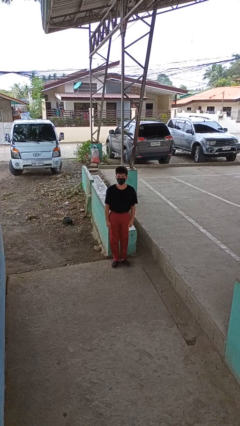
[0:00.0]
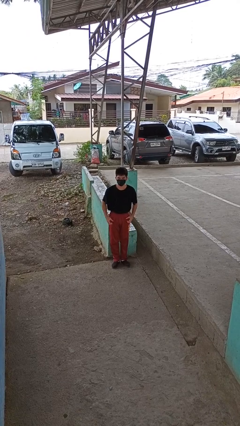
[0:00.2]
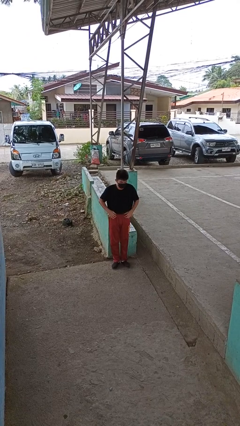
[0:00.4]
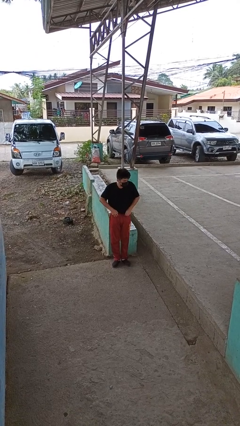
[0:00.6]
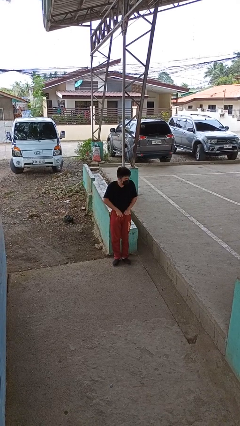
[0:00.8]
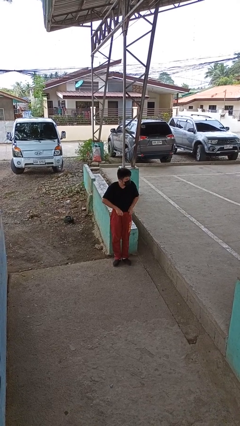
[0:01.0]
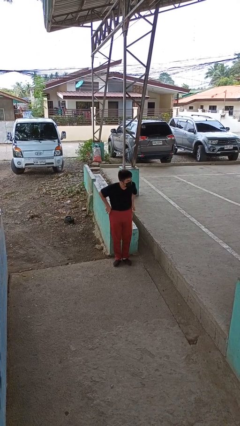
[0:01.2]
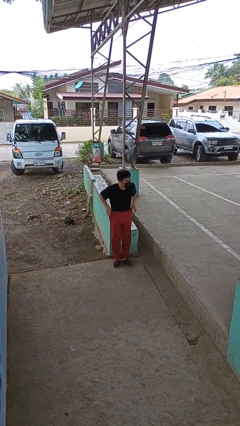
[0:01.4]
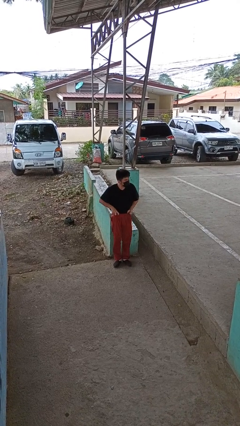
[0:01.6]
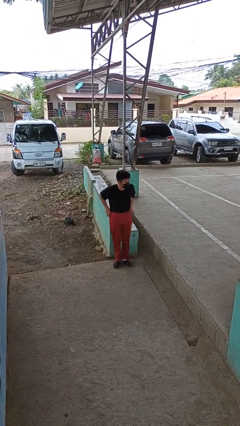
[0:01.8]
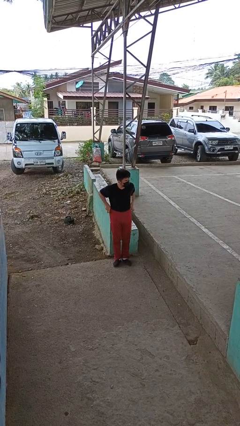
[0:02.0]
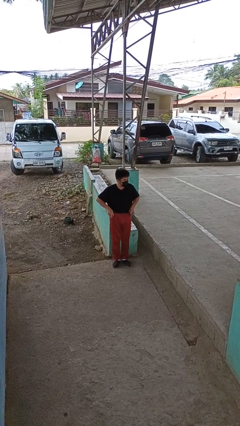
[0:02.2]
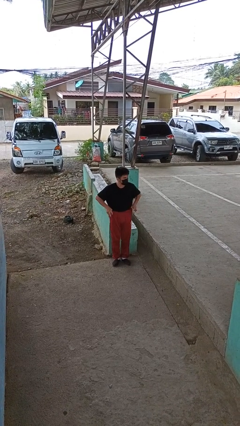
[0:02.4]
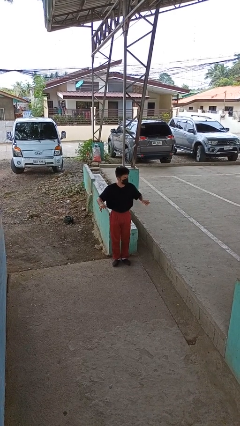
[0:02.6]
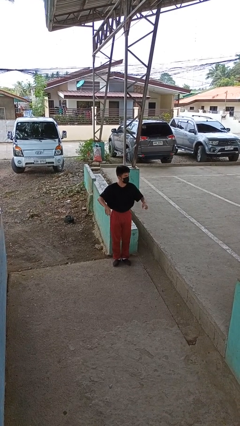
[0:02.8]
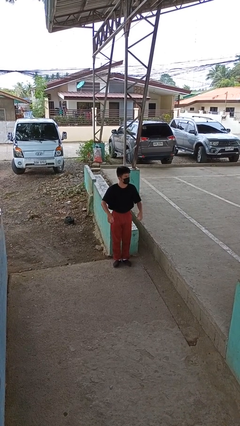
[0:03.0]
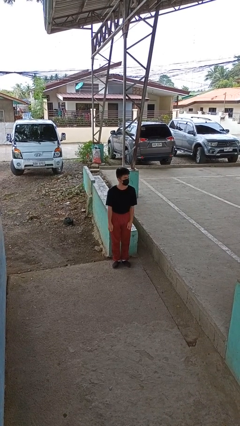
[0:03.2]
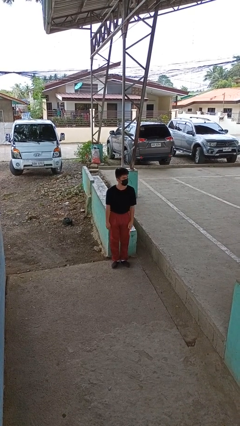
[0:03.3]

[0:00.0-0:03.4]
person hikes up pants

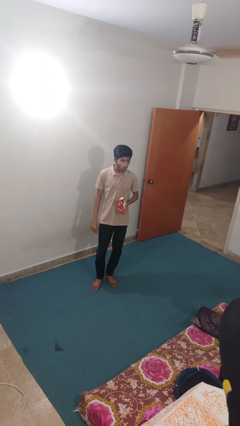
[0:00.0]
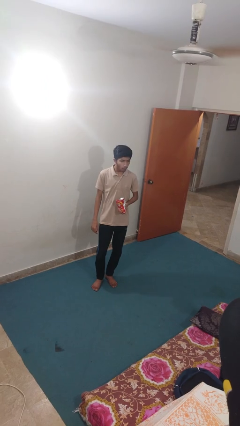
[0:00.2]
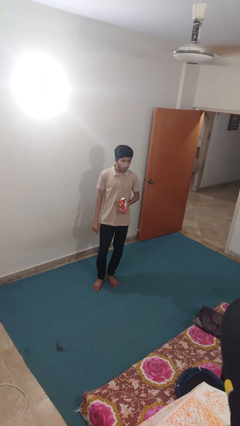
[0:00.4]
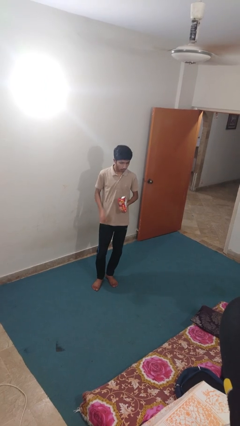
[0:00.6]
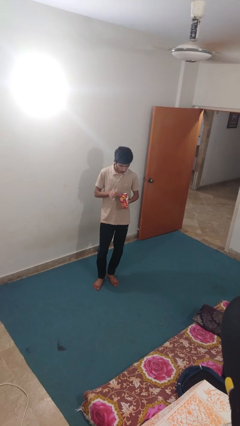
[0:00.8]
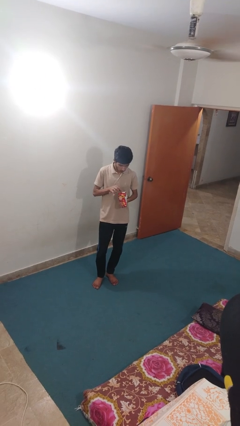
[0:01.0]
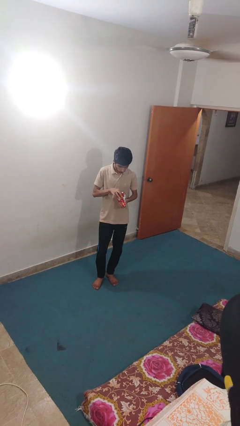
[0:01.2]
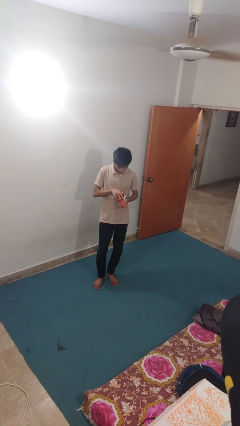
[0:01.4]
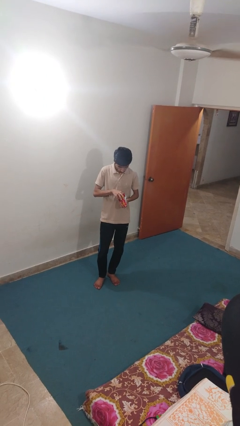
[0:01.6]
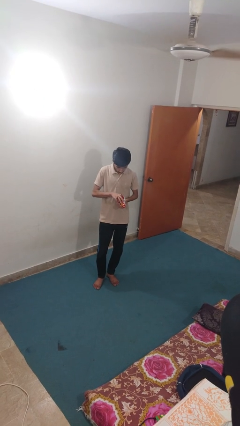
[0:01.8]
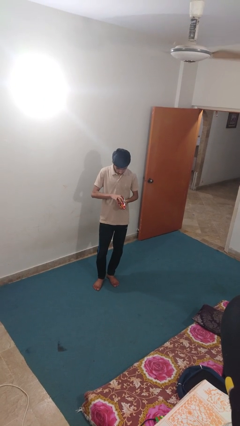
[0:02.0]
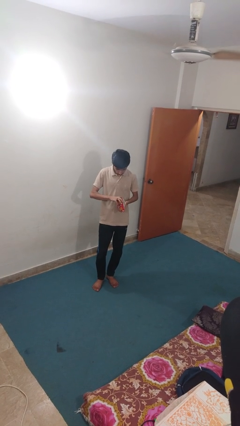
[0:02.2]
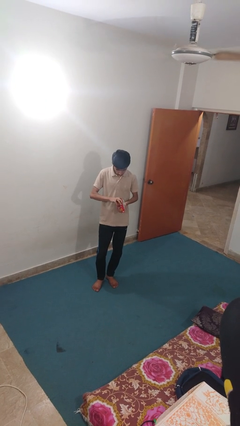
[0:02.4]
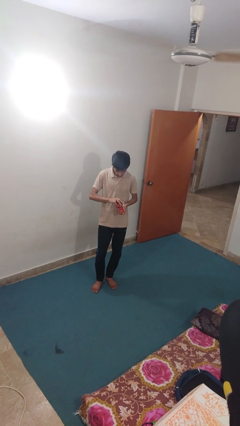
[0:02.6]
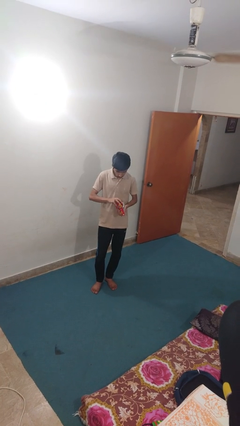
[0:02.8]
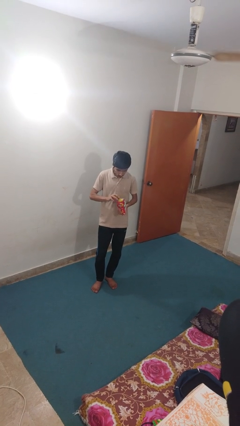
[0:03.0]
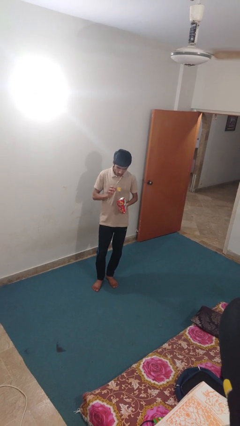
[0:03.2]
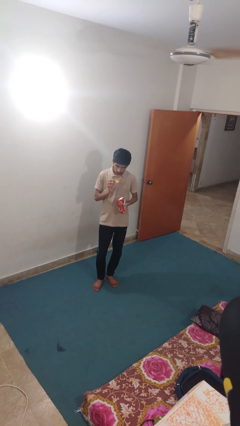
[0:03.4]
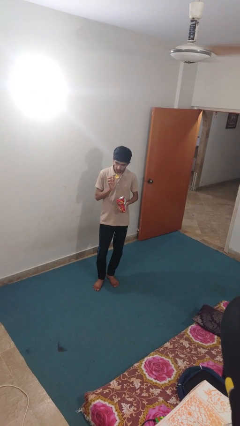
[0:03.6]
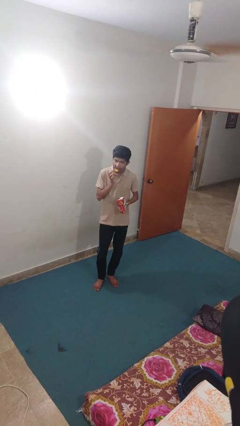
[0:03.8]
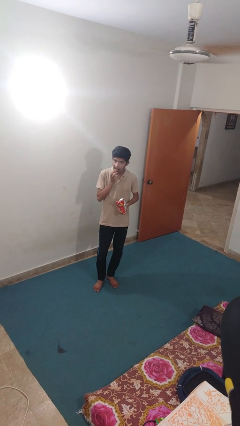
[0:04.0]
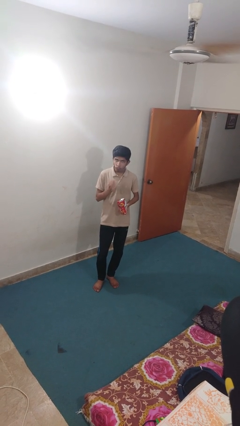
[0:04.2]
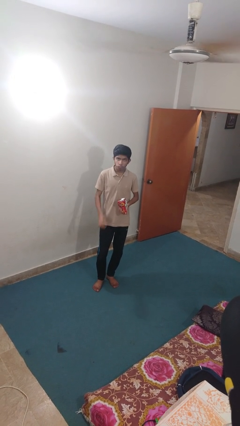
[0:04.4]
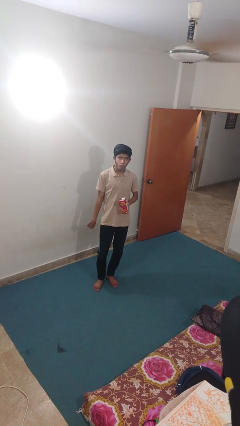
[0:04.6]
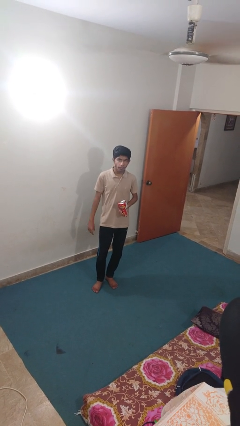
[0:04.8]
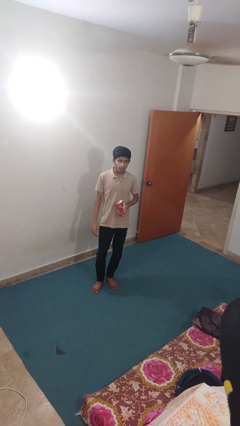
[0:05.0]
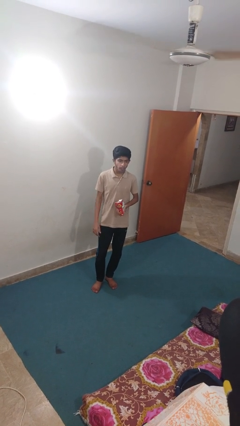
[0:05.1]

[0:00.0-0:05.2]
person eats snack from bag

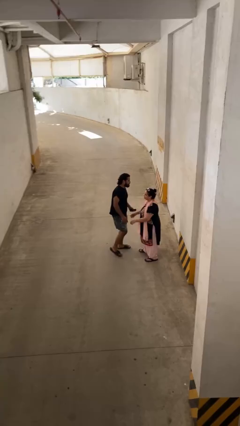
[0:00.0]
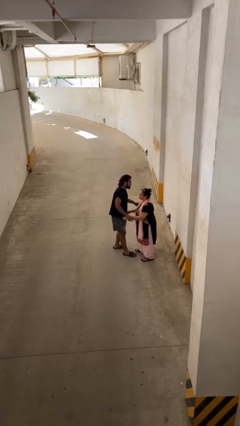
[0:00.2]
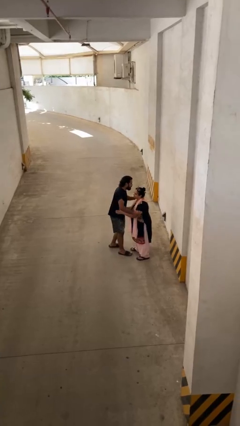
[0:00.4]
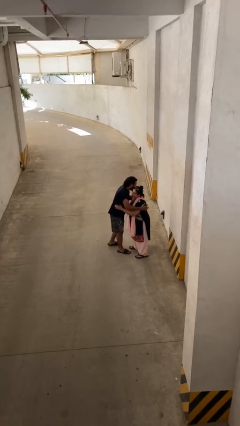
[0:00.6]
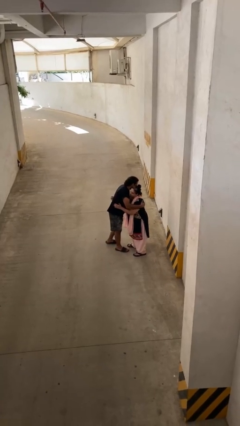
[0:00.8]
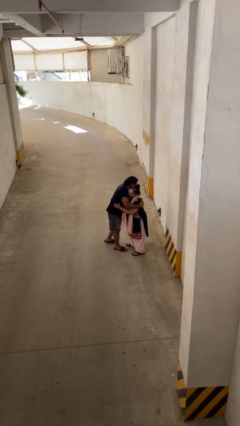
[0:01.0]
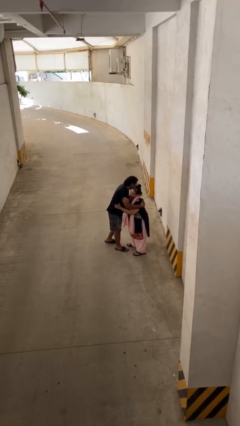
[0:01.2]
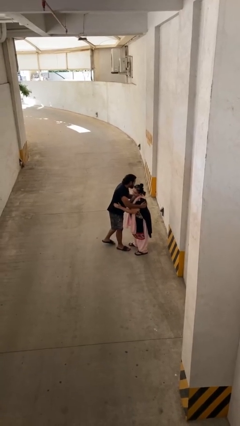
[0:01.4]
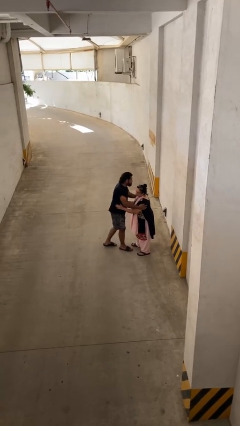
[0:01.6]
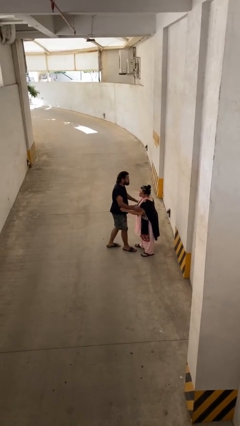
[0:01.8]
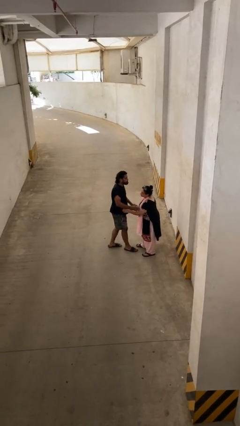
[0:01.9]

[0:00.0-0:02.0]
person embraces person

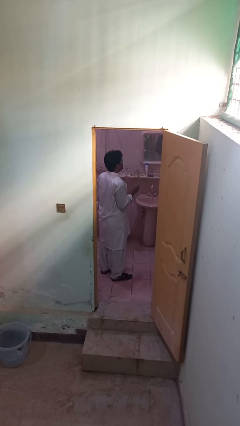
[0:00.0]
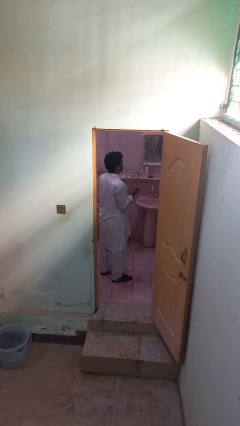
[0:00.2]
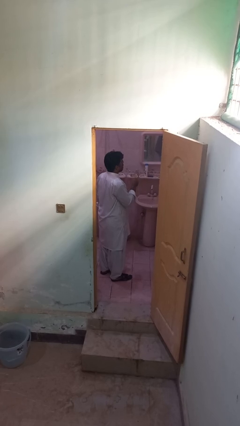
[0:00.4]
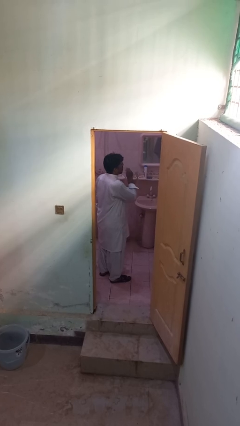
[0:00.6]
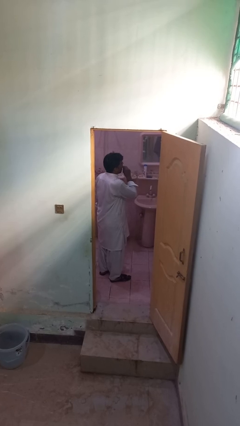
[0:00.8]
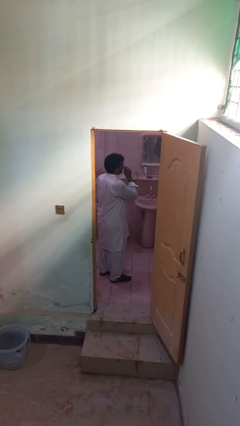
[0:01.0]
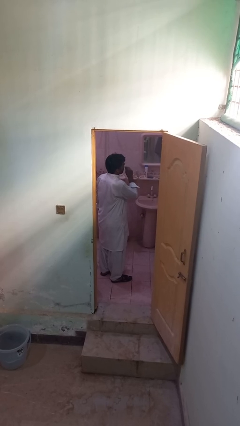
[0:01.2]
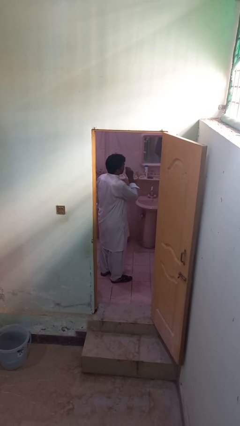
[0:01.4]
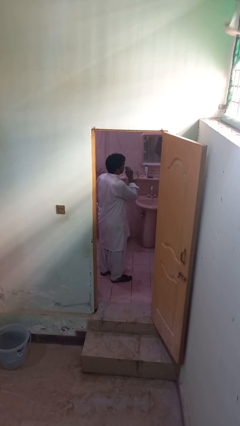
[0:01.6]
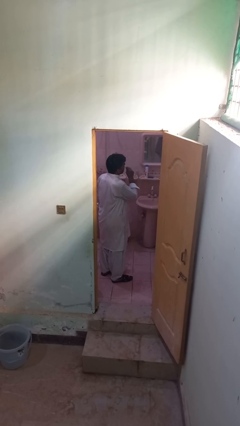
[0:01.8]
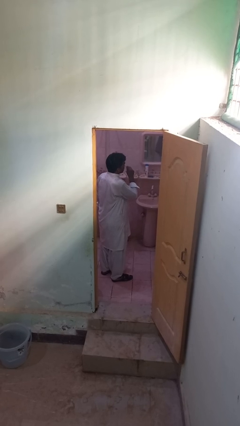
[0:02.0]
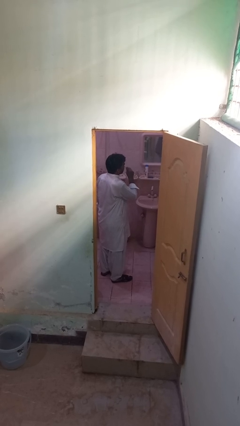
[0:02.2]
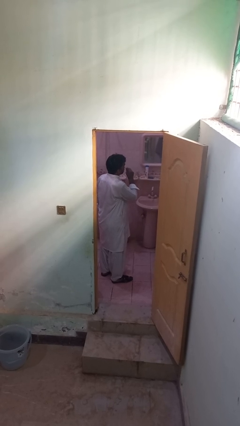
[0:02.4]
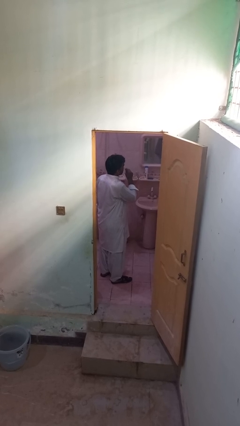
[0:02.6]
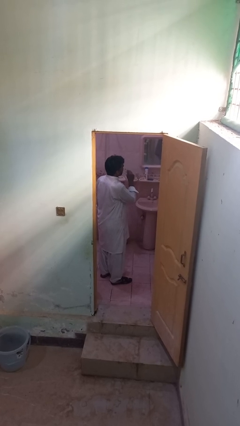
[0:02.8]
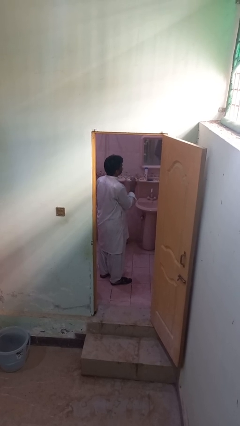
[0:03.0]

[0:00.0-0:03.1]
person flosses

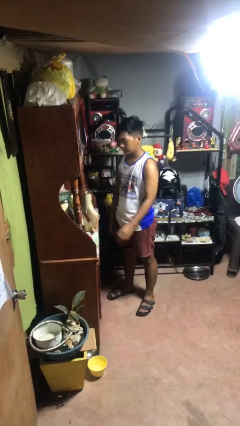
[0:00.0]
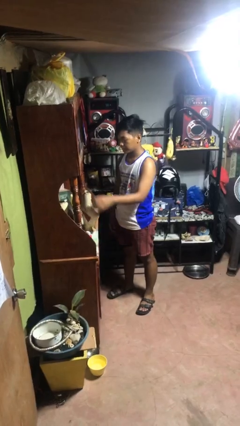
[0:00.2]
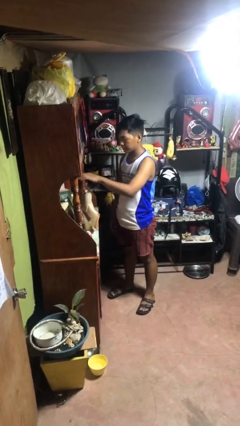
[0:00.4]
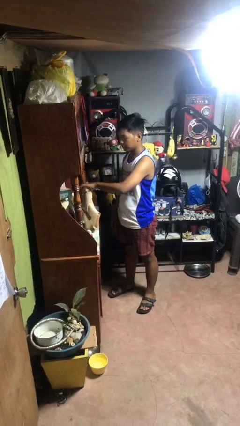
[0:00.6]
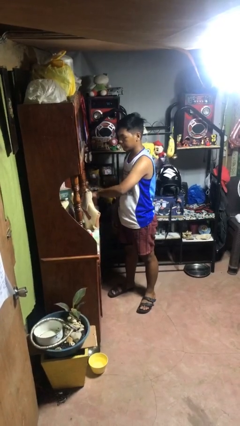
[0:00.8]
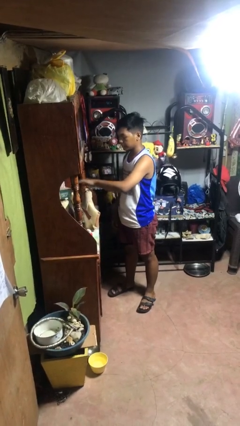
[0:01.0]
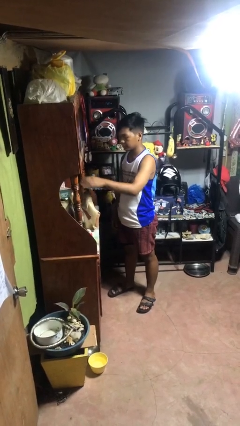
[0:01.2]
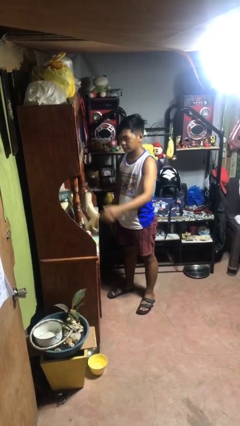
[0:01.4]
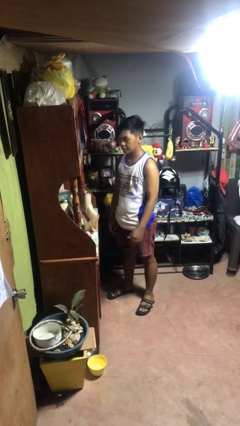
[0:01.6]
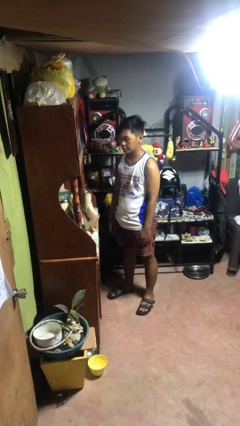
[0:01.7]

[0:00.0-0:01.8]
person waves hand over object

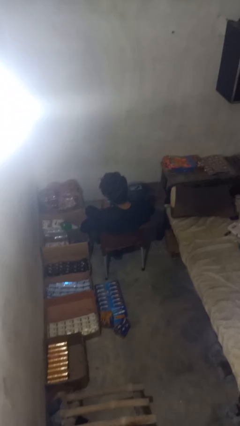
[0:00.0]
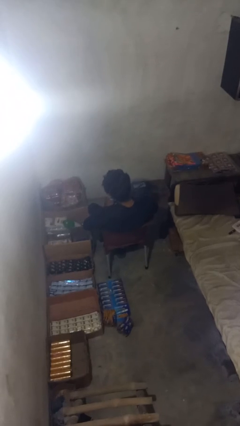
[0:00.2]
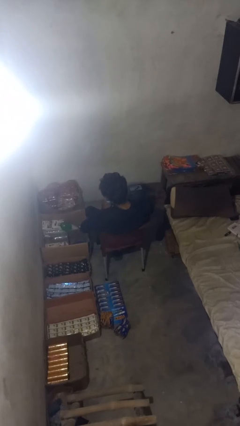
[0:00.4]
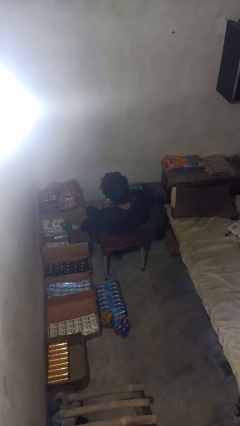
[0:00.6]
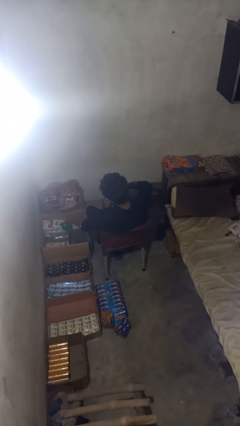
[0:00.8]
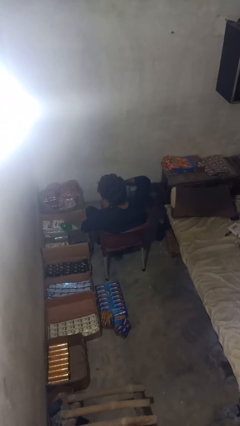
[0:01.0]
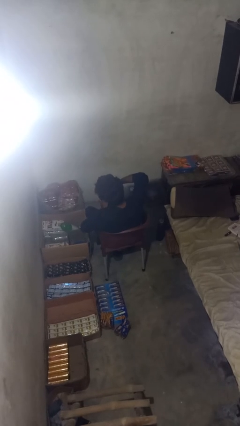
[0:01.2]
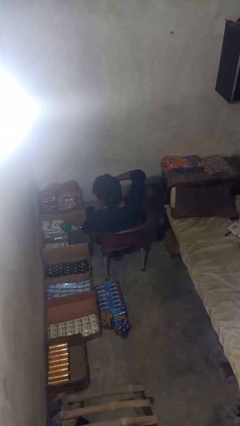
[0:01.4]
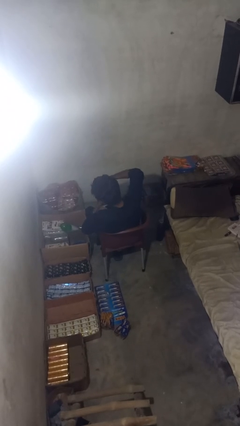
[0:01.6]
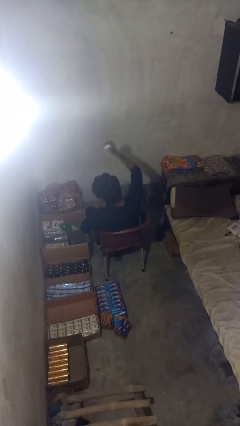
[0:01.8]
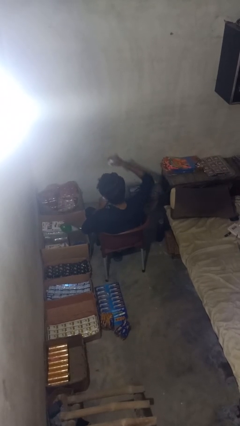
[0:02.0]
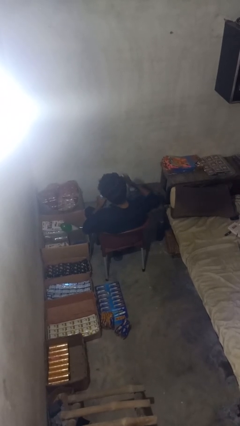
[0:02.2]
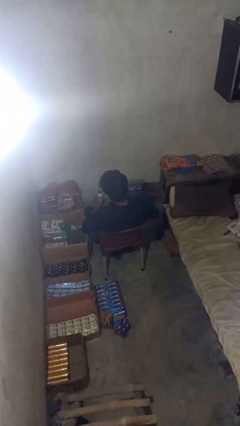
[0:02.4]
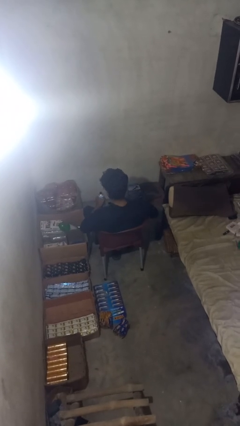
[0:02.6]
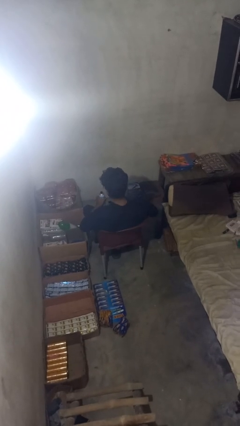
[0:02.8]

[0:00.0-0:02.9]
person opens can with can opener
